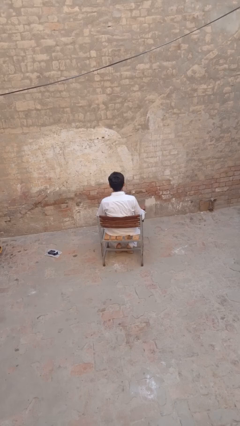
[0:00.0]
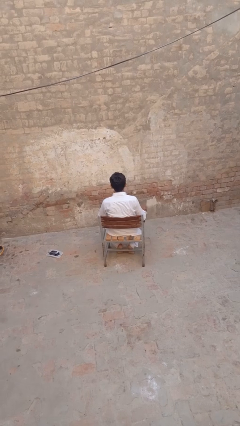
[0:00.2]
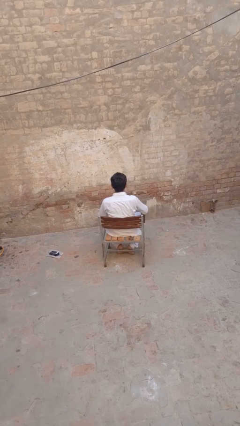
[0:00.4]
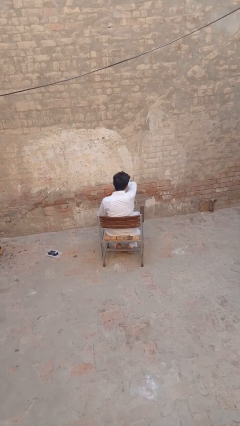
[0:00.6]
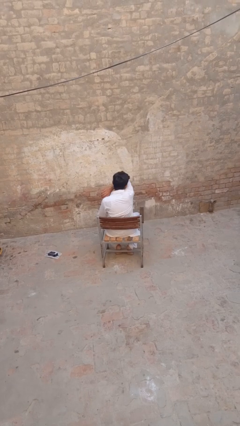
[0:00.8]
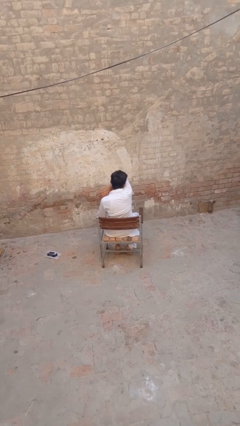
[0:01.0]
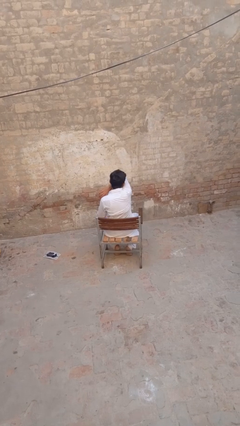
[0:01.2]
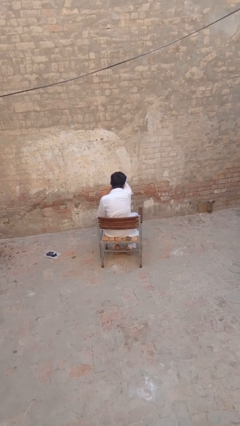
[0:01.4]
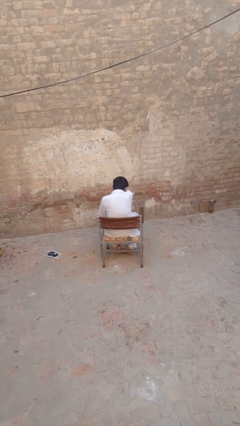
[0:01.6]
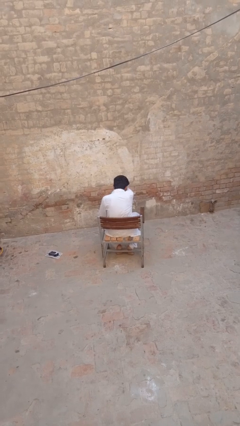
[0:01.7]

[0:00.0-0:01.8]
person sneezes into arm

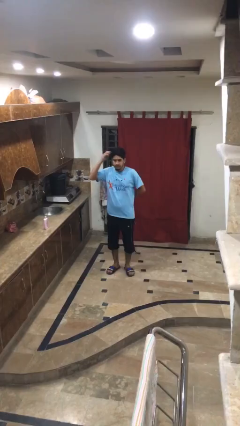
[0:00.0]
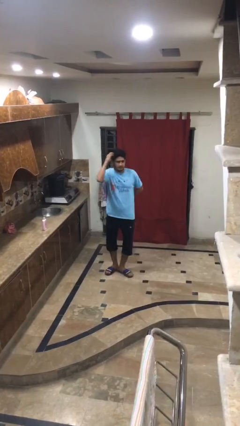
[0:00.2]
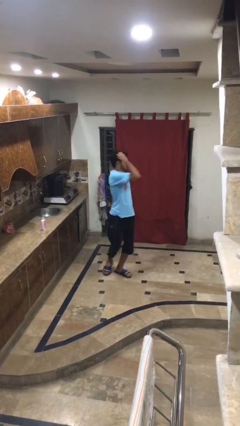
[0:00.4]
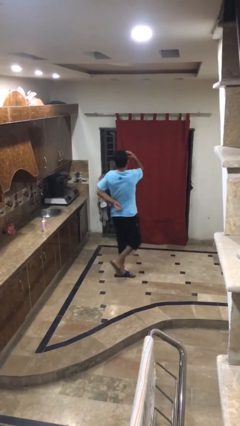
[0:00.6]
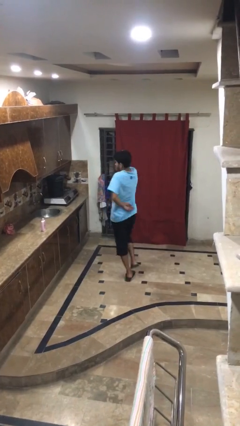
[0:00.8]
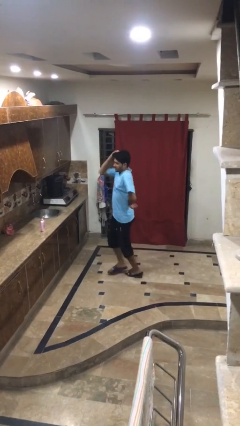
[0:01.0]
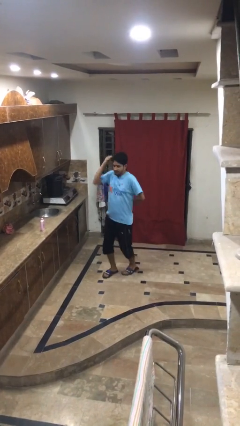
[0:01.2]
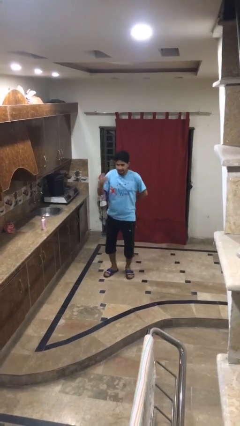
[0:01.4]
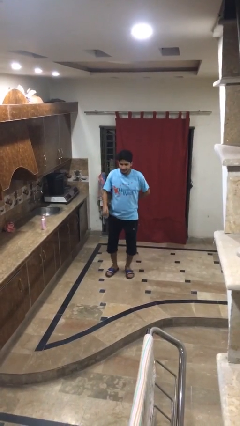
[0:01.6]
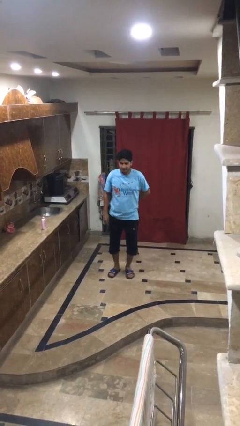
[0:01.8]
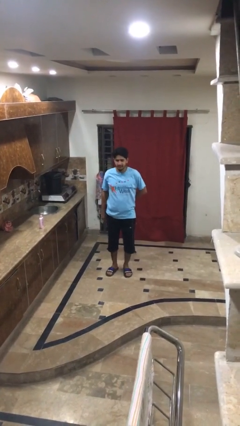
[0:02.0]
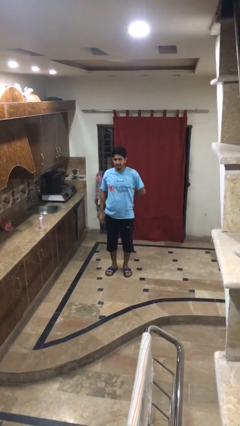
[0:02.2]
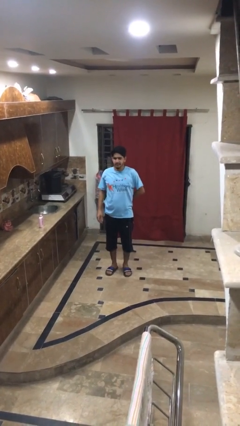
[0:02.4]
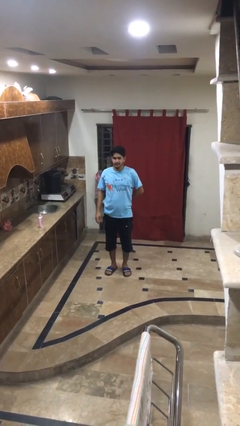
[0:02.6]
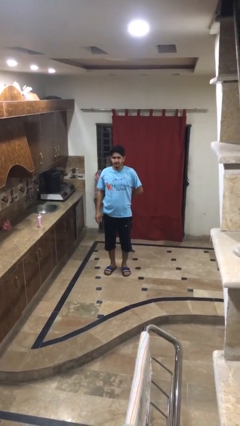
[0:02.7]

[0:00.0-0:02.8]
person twirls

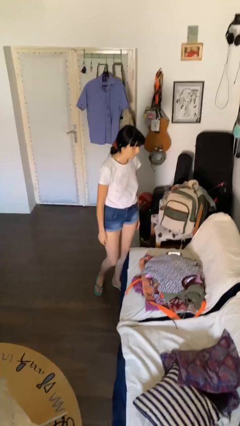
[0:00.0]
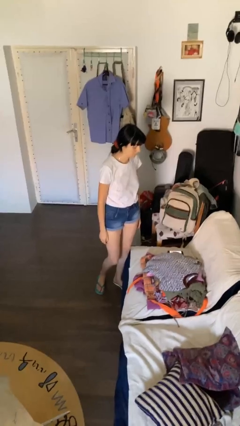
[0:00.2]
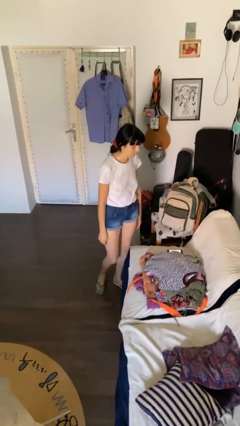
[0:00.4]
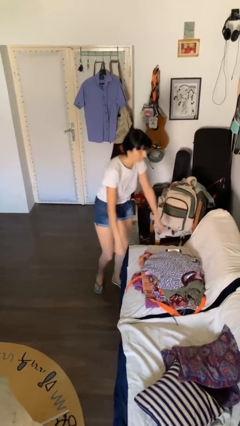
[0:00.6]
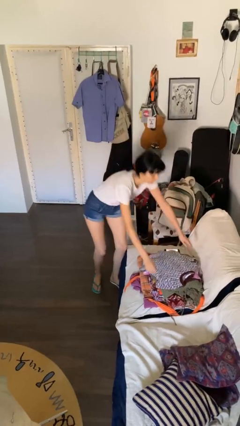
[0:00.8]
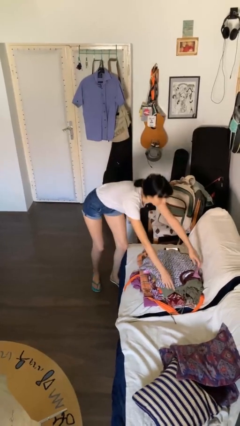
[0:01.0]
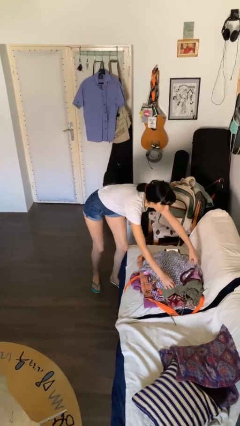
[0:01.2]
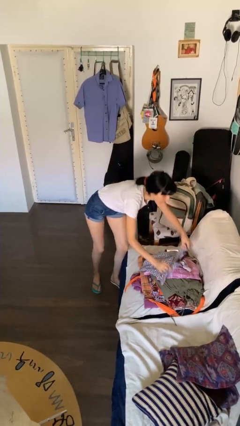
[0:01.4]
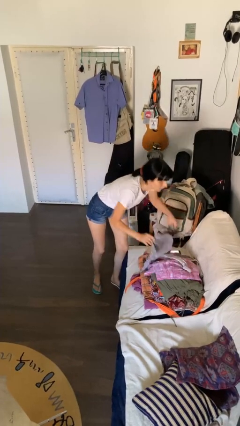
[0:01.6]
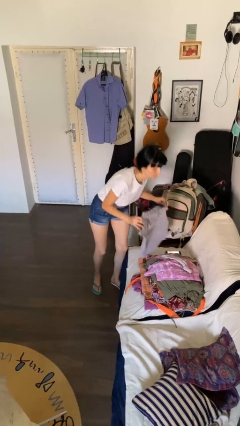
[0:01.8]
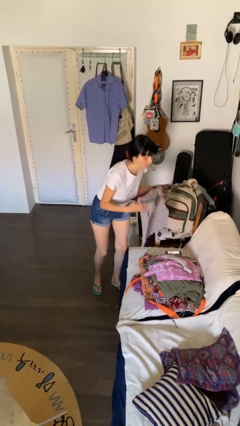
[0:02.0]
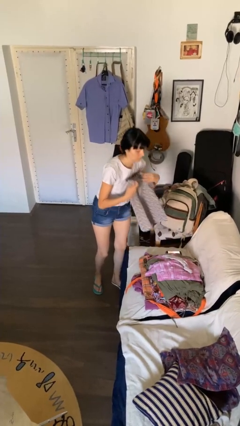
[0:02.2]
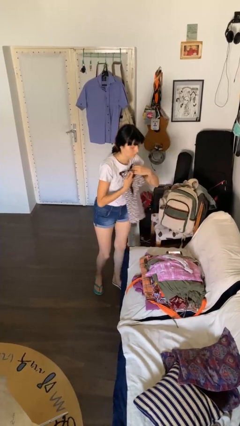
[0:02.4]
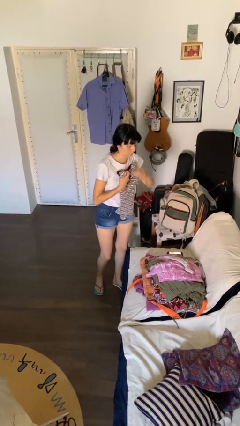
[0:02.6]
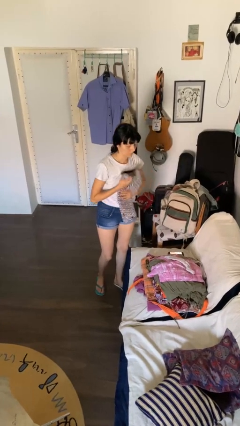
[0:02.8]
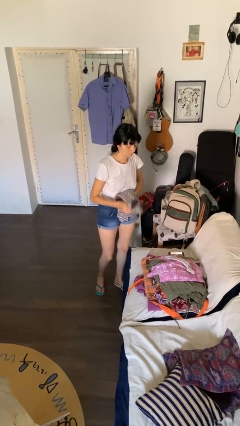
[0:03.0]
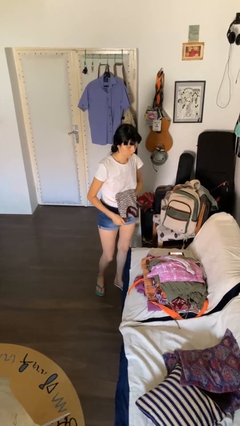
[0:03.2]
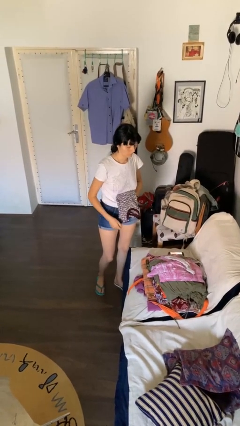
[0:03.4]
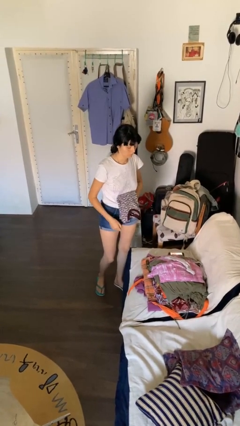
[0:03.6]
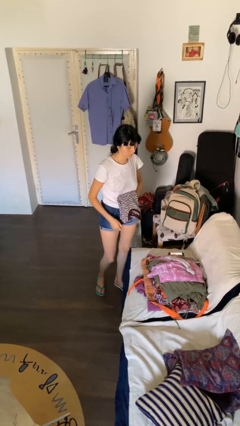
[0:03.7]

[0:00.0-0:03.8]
person folds shirt

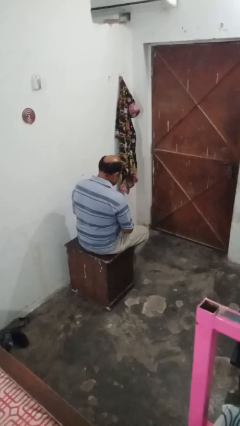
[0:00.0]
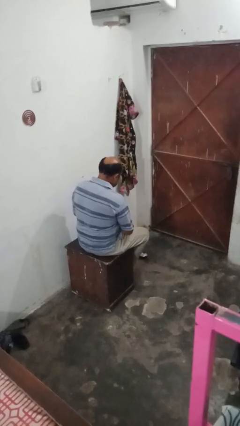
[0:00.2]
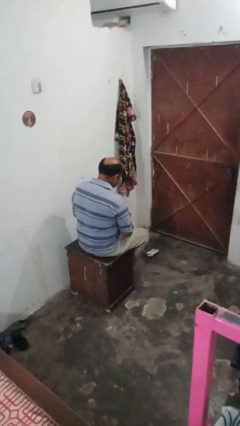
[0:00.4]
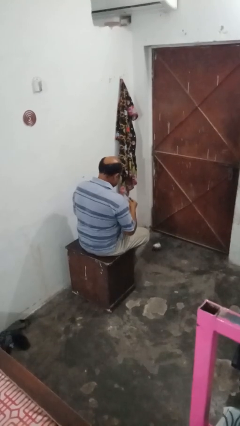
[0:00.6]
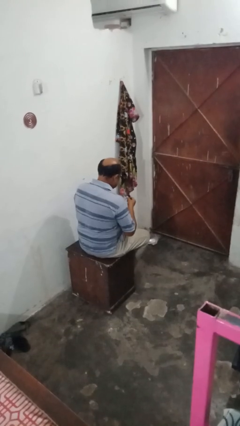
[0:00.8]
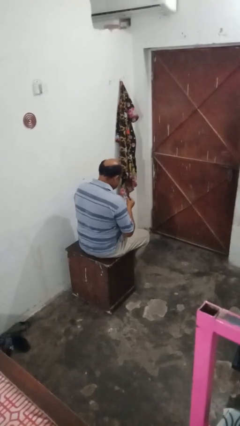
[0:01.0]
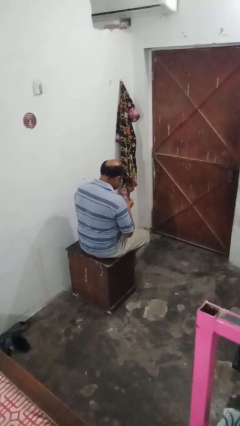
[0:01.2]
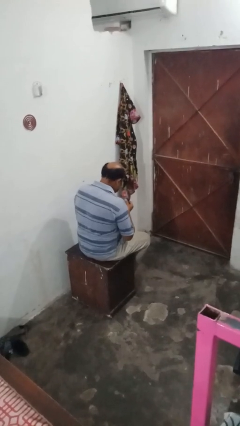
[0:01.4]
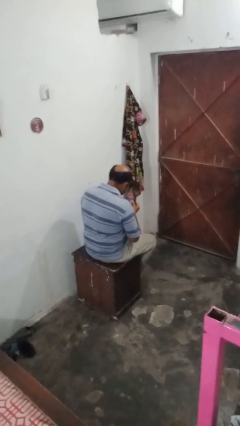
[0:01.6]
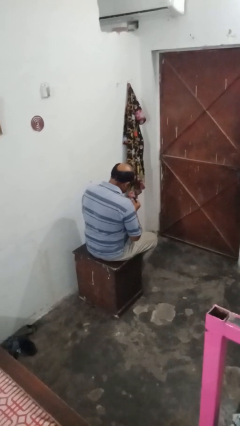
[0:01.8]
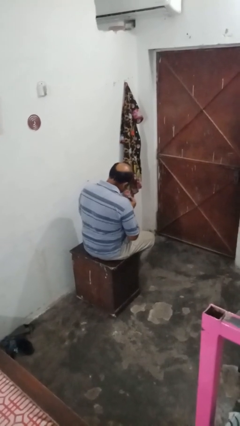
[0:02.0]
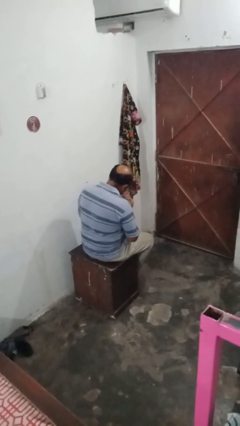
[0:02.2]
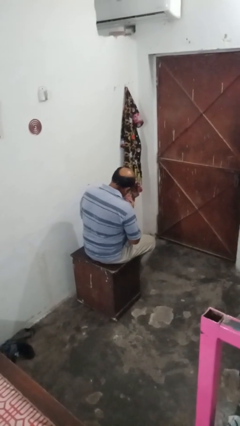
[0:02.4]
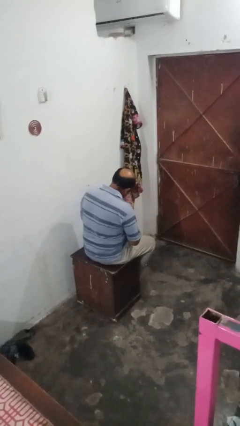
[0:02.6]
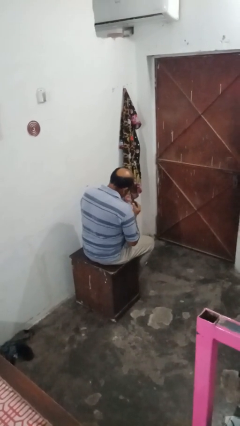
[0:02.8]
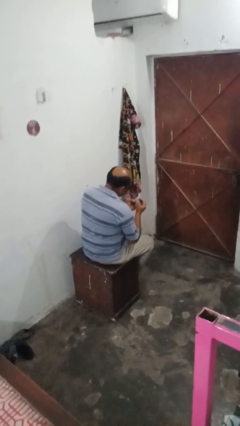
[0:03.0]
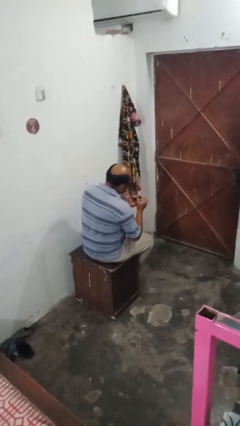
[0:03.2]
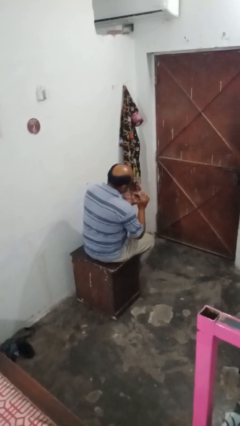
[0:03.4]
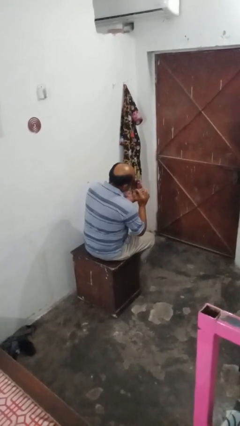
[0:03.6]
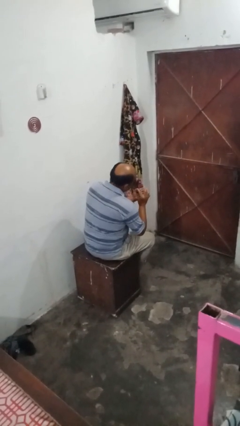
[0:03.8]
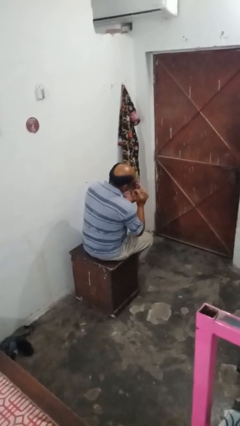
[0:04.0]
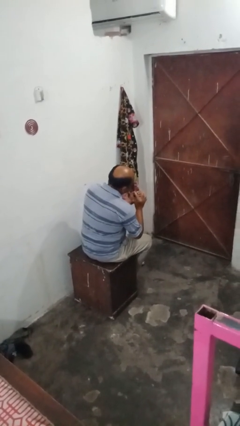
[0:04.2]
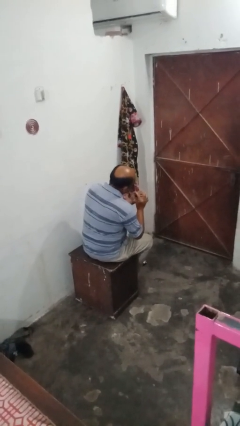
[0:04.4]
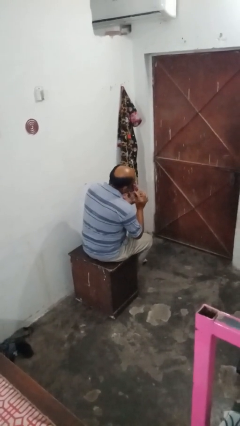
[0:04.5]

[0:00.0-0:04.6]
person paints fingernails

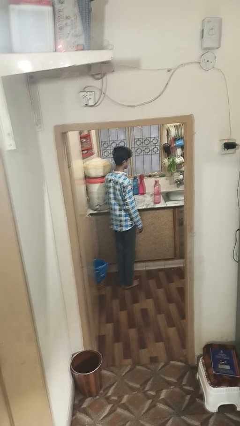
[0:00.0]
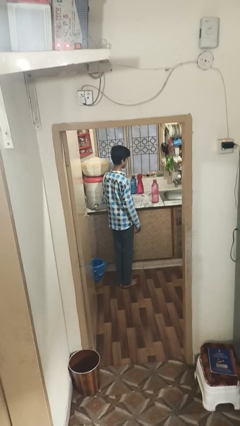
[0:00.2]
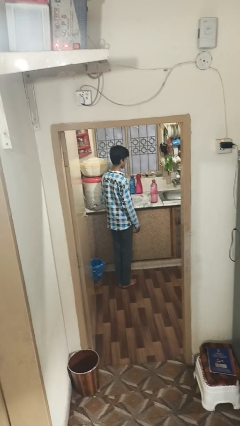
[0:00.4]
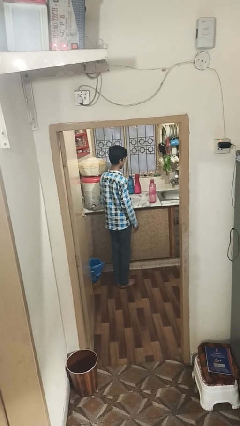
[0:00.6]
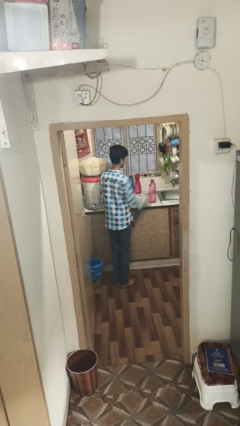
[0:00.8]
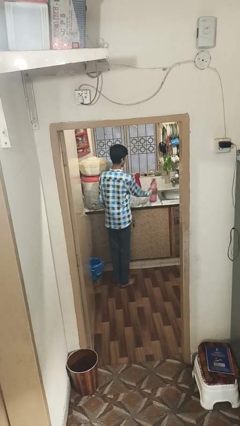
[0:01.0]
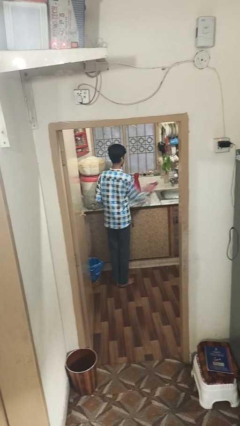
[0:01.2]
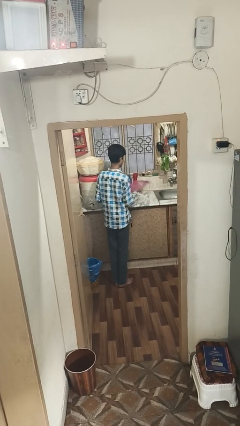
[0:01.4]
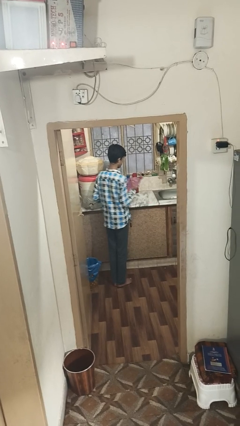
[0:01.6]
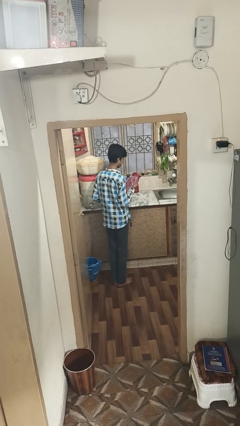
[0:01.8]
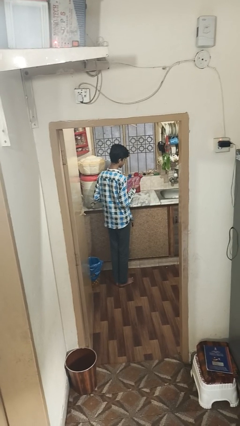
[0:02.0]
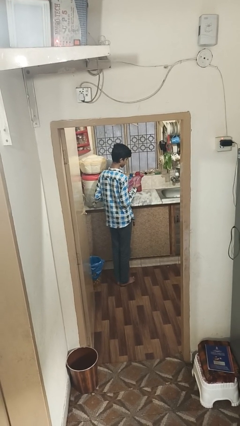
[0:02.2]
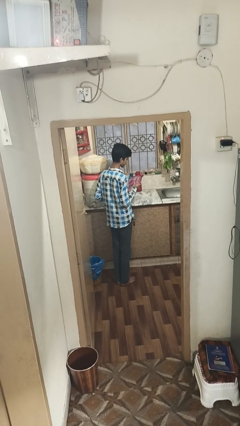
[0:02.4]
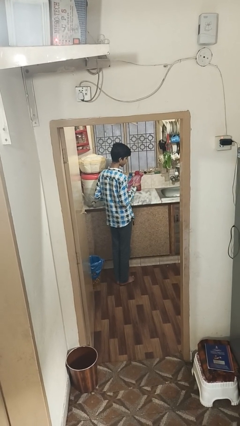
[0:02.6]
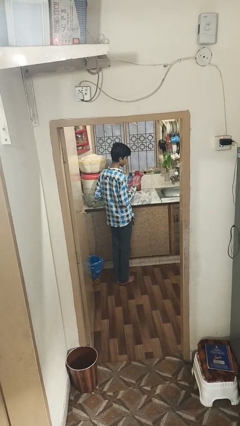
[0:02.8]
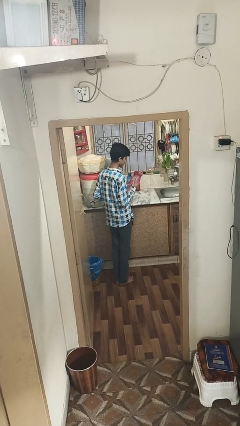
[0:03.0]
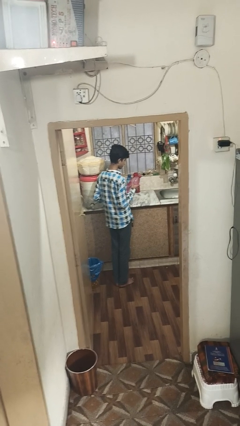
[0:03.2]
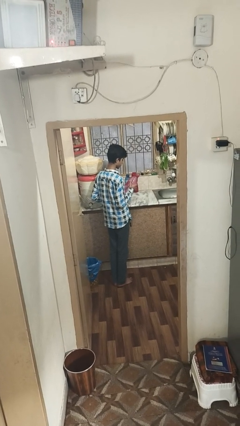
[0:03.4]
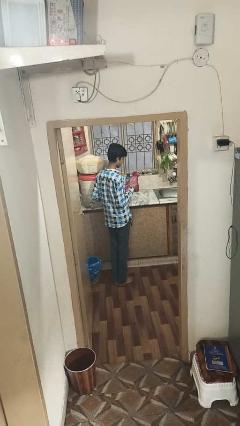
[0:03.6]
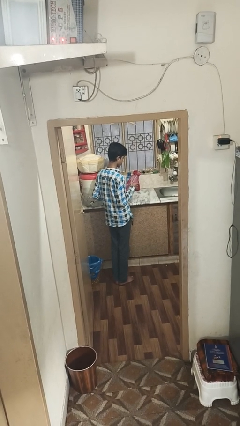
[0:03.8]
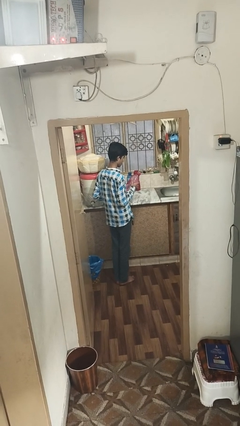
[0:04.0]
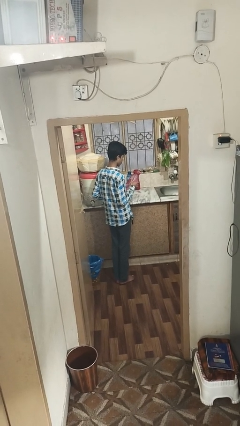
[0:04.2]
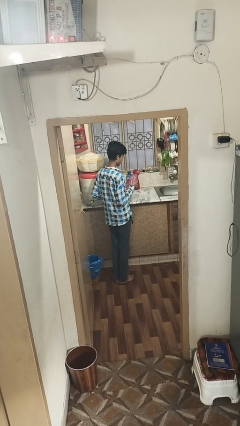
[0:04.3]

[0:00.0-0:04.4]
person picks up object from countertop
